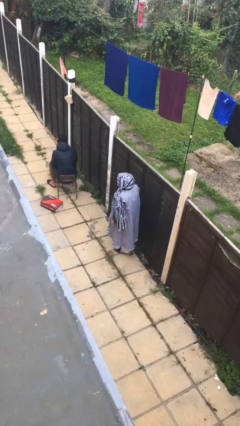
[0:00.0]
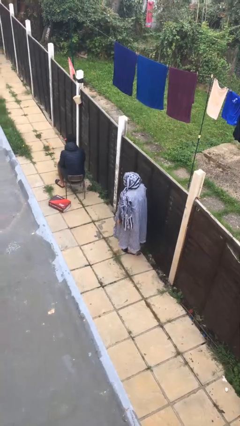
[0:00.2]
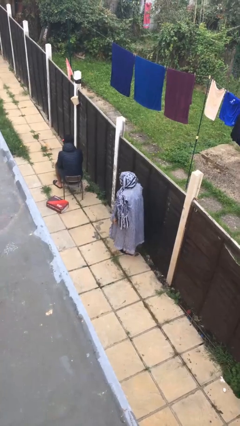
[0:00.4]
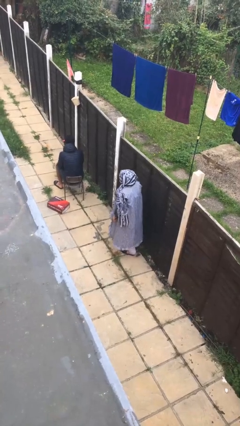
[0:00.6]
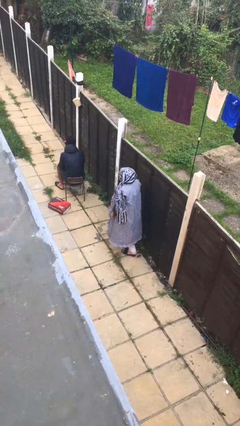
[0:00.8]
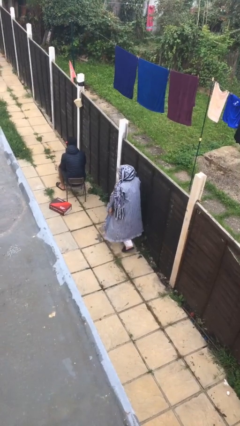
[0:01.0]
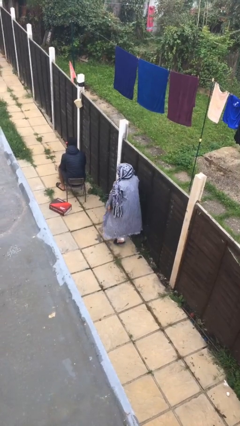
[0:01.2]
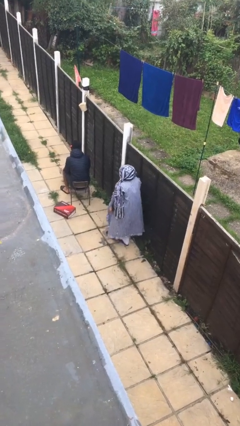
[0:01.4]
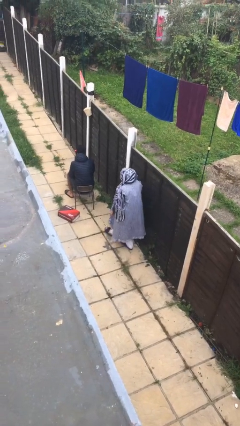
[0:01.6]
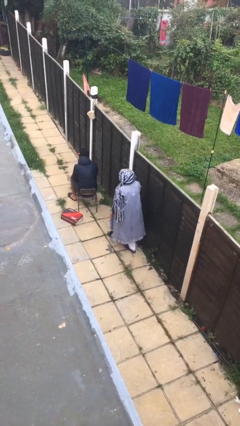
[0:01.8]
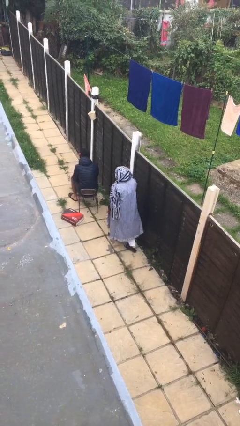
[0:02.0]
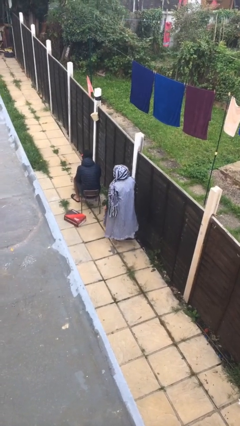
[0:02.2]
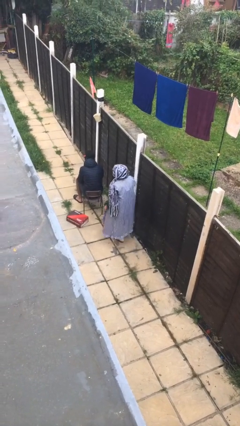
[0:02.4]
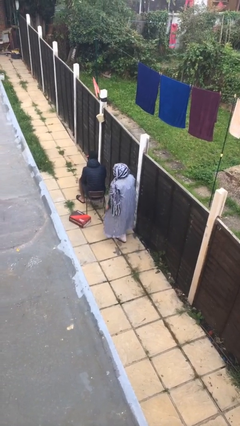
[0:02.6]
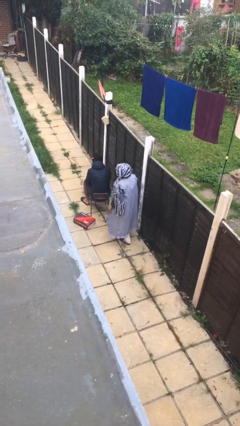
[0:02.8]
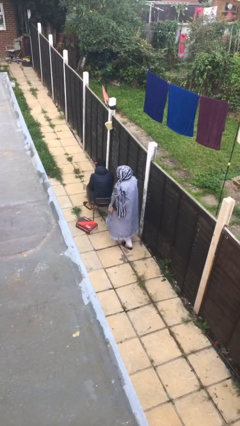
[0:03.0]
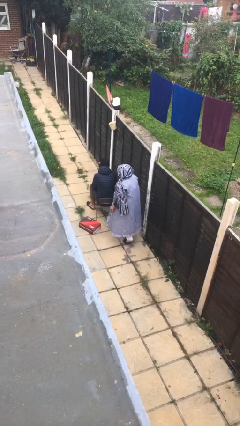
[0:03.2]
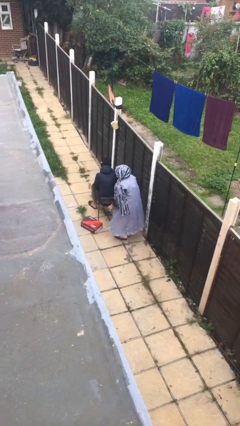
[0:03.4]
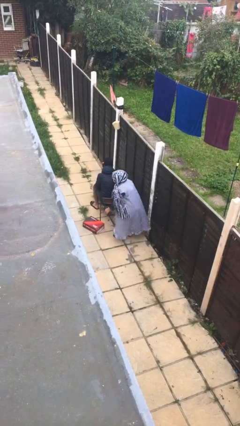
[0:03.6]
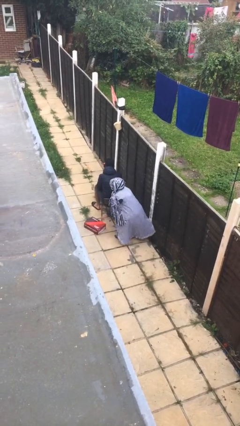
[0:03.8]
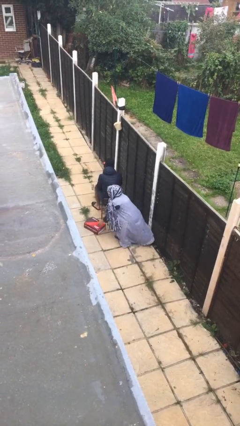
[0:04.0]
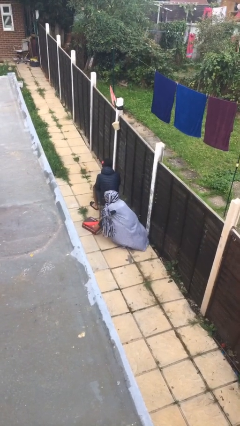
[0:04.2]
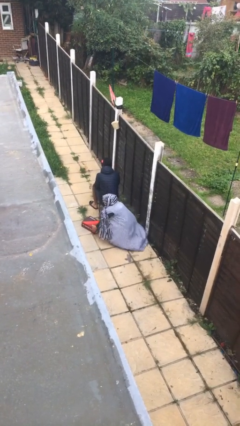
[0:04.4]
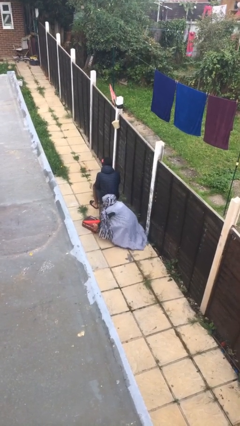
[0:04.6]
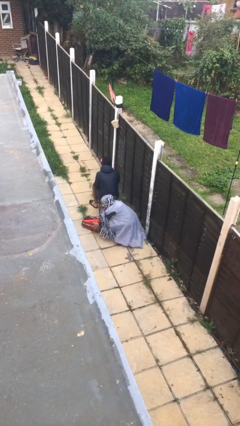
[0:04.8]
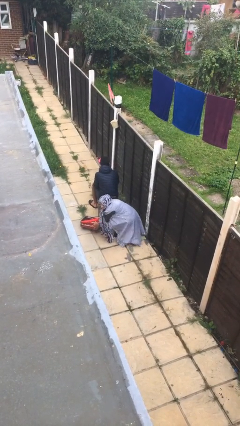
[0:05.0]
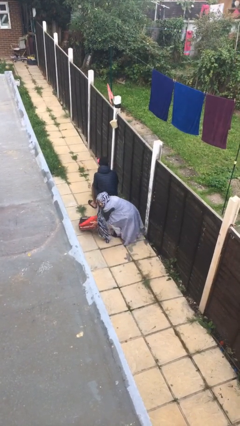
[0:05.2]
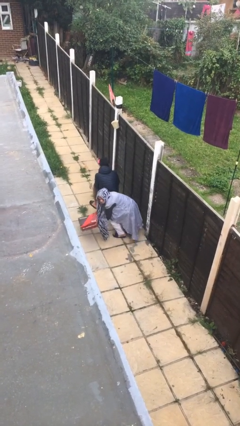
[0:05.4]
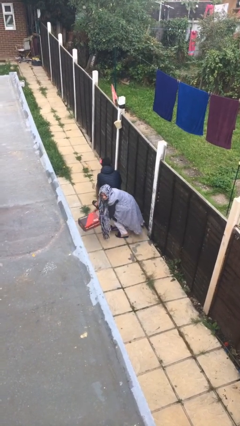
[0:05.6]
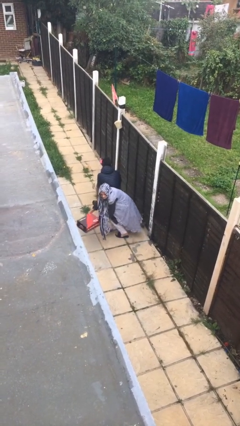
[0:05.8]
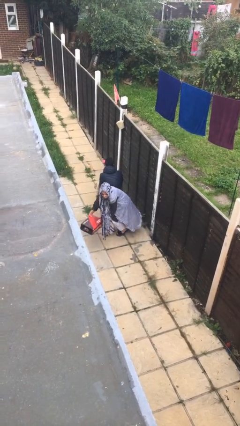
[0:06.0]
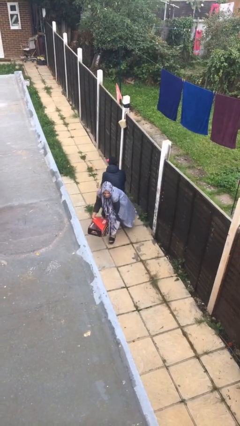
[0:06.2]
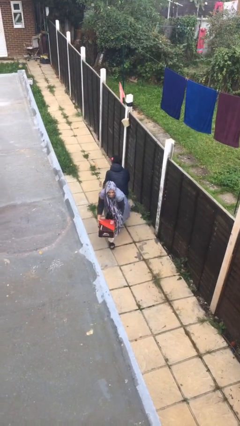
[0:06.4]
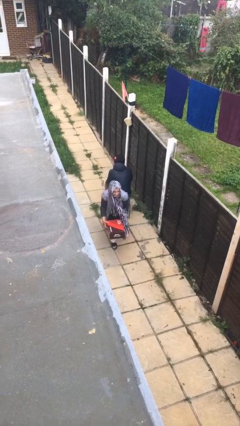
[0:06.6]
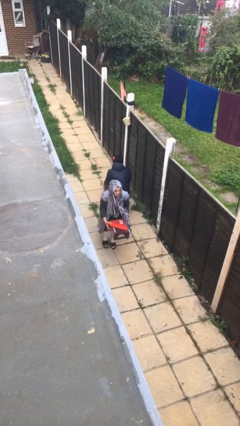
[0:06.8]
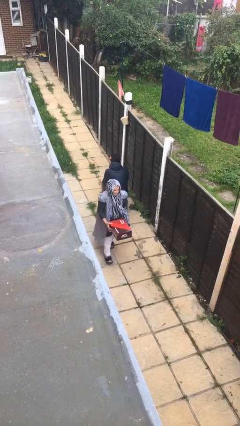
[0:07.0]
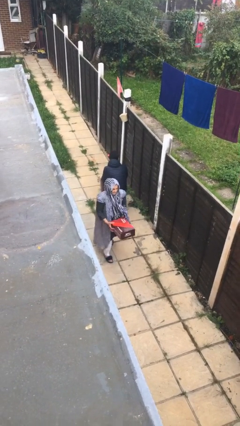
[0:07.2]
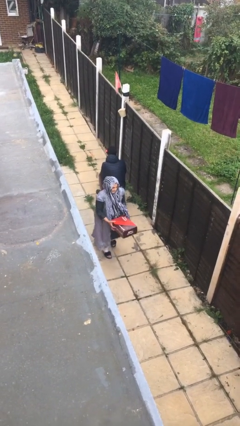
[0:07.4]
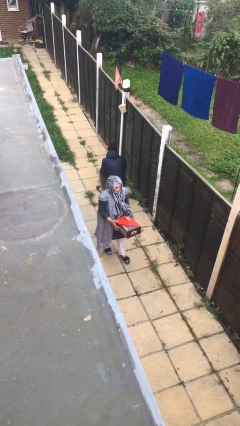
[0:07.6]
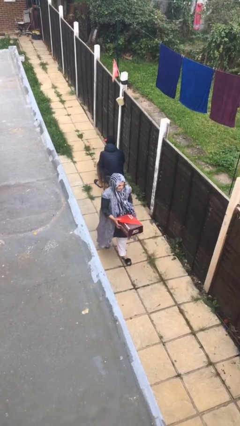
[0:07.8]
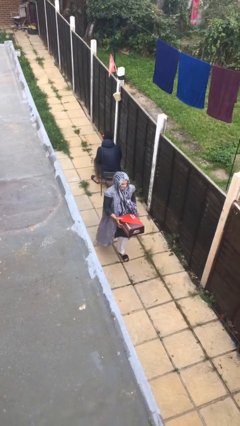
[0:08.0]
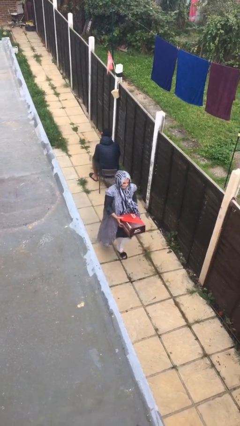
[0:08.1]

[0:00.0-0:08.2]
person steals object from person

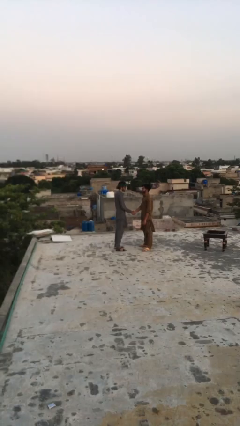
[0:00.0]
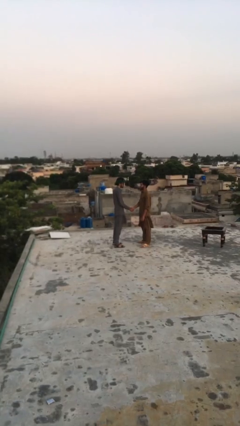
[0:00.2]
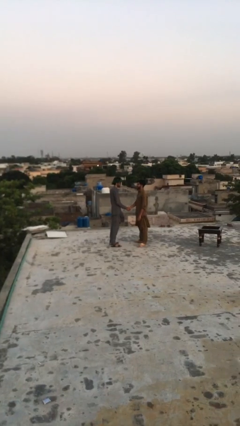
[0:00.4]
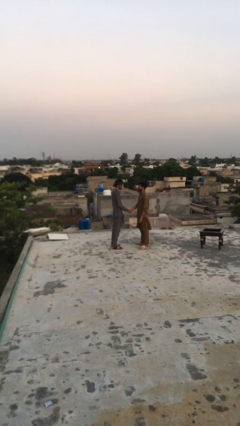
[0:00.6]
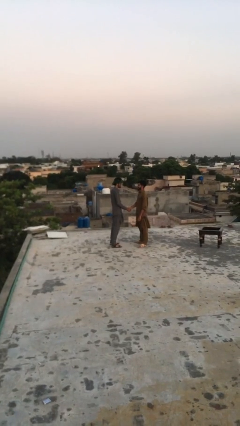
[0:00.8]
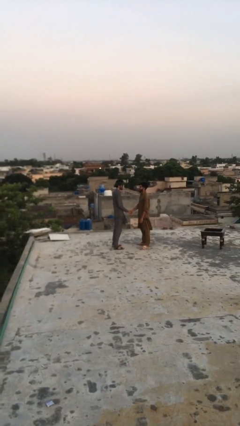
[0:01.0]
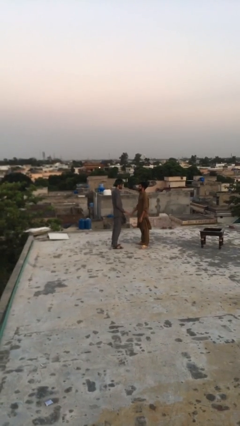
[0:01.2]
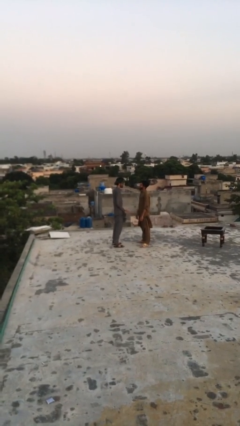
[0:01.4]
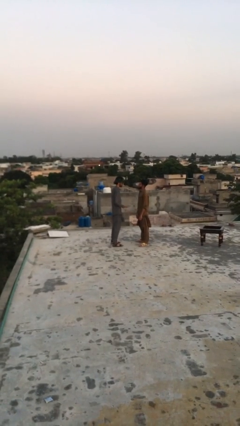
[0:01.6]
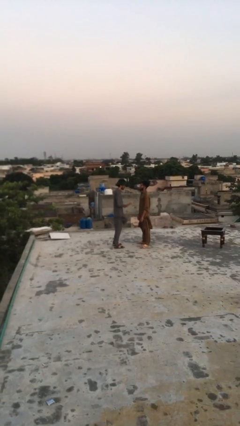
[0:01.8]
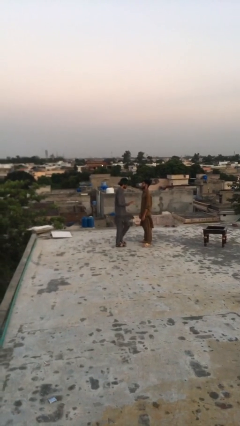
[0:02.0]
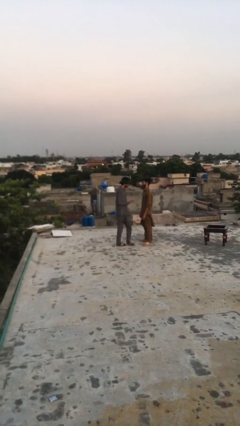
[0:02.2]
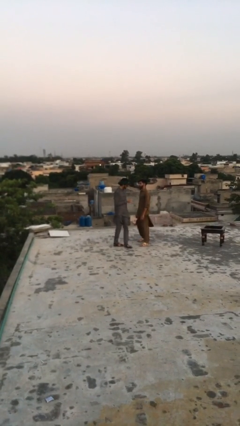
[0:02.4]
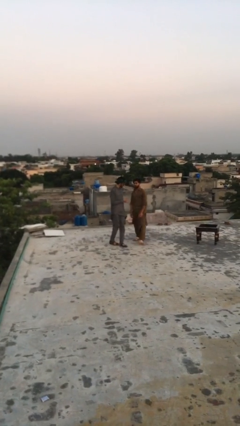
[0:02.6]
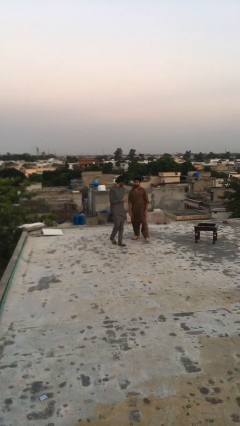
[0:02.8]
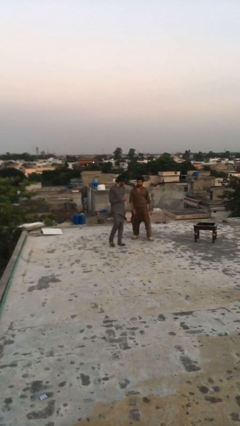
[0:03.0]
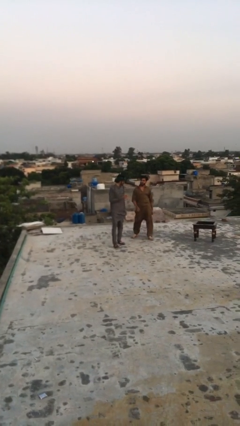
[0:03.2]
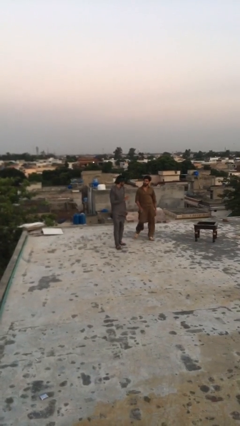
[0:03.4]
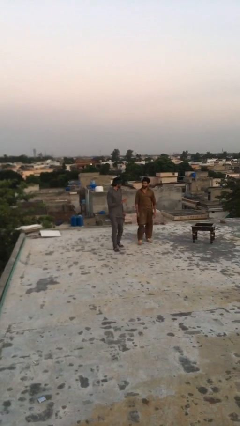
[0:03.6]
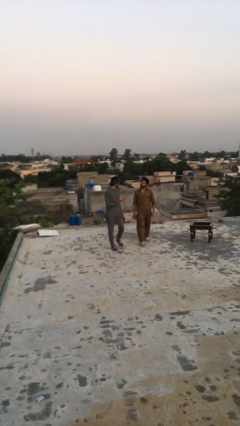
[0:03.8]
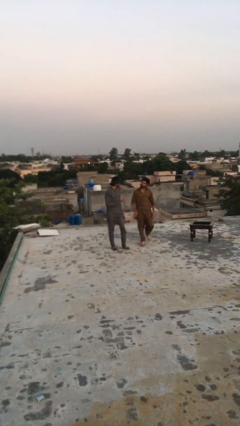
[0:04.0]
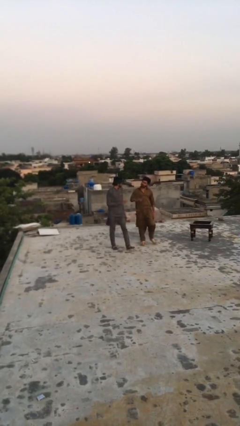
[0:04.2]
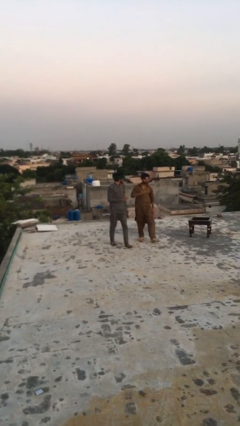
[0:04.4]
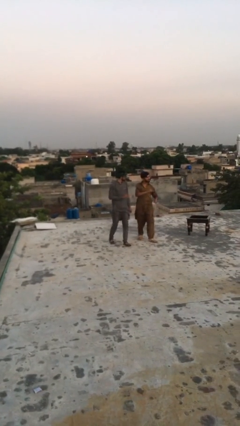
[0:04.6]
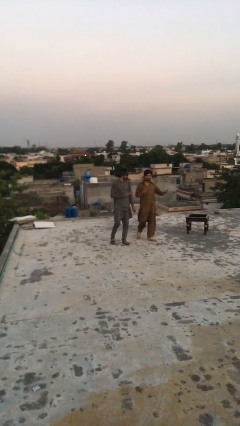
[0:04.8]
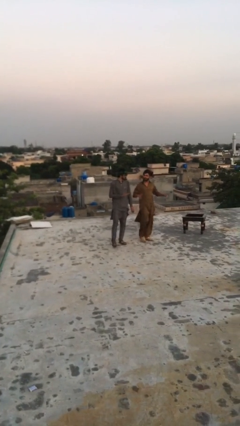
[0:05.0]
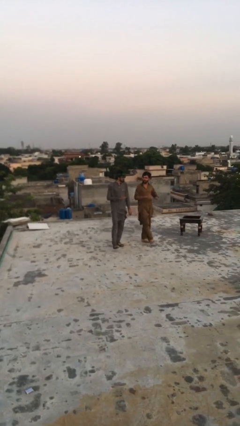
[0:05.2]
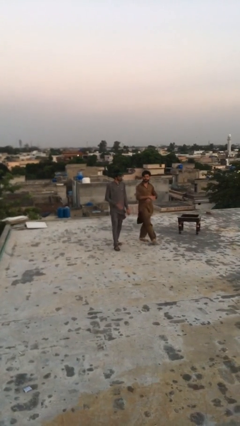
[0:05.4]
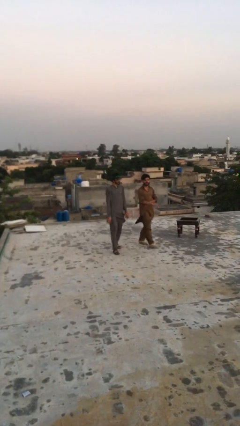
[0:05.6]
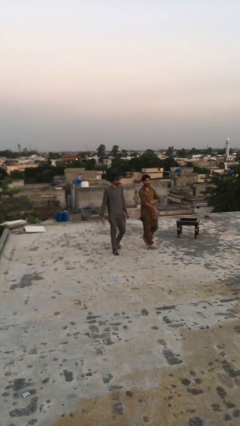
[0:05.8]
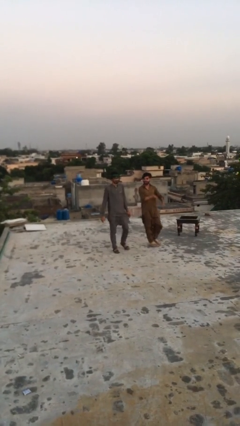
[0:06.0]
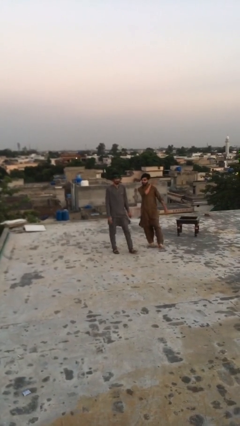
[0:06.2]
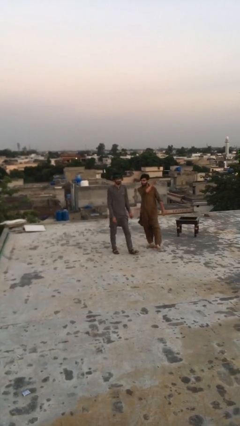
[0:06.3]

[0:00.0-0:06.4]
person talks to person

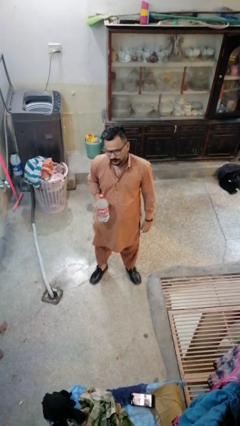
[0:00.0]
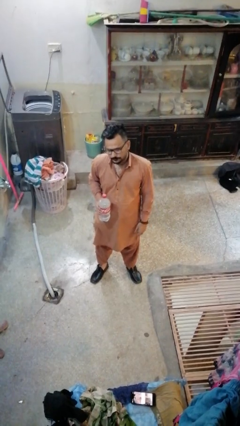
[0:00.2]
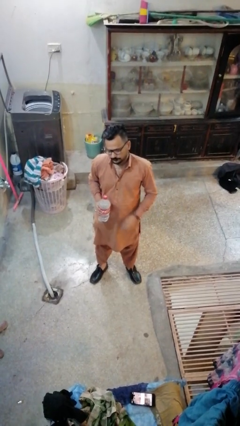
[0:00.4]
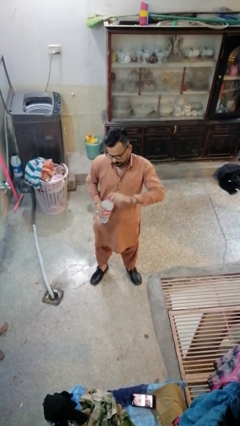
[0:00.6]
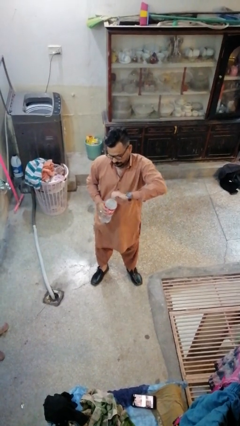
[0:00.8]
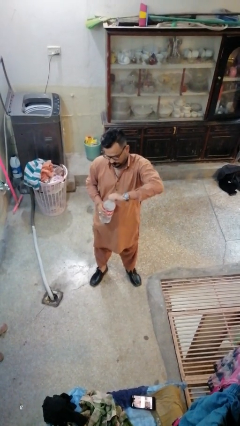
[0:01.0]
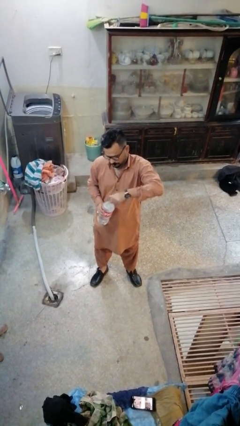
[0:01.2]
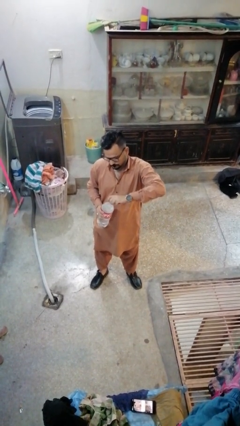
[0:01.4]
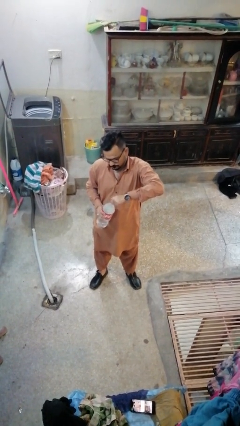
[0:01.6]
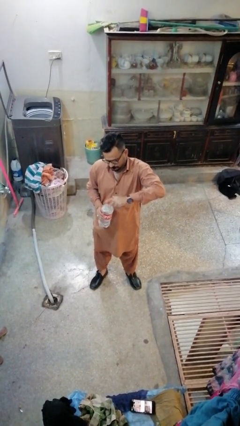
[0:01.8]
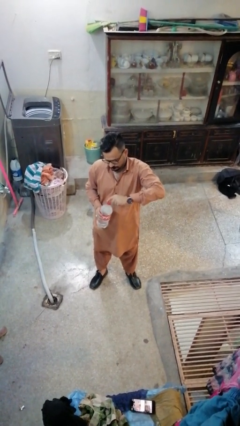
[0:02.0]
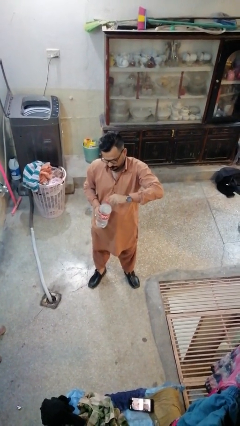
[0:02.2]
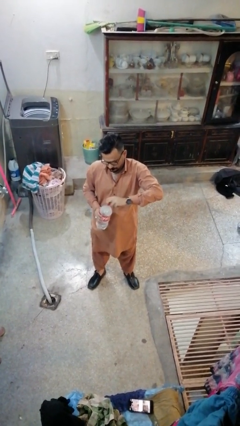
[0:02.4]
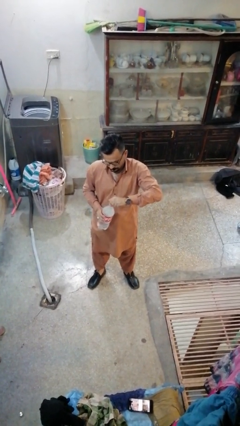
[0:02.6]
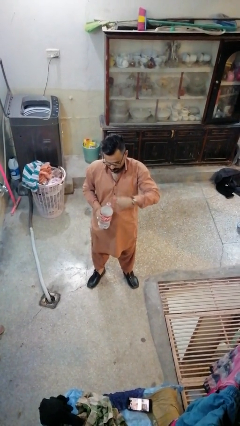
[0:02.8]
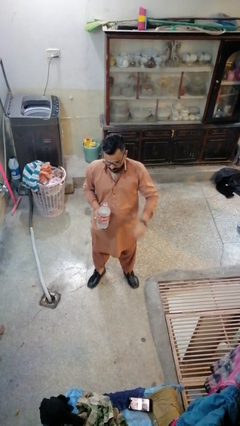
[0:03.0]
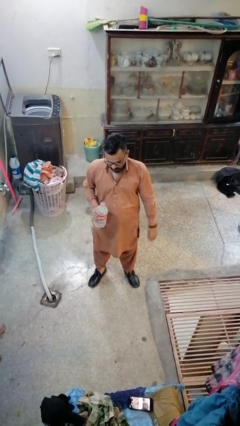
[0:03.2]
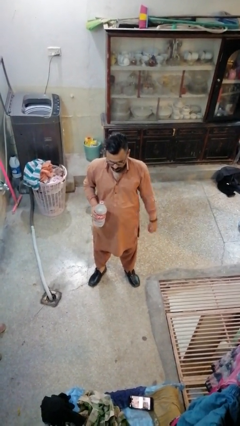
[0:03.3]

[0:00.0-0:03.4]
person unscrews lid from bottle
